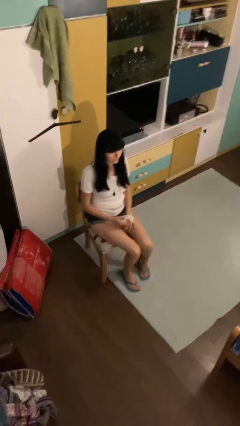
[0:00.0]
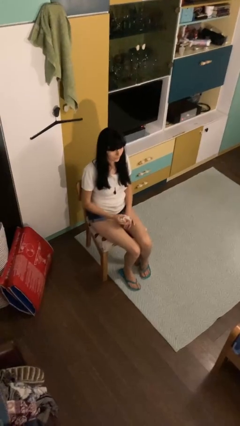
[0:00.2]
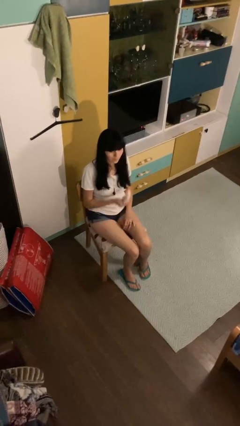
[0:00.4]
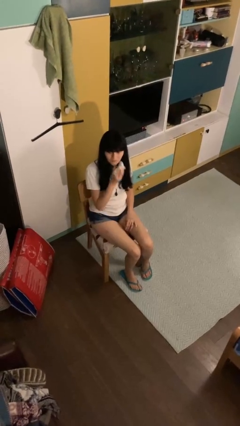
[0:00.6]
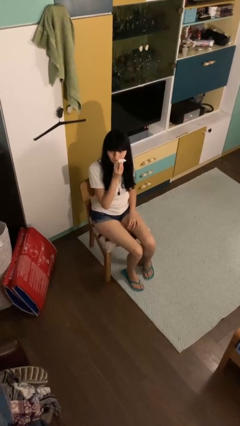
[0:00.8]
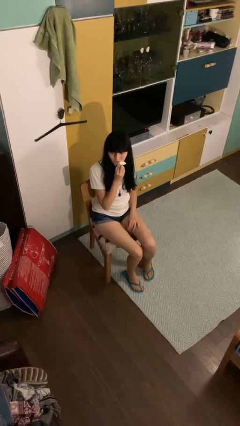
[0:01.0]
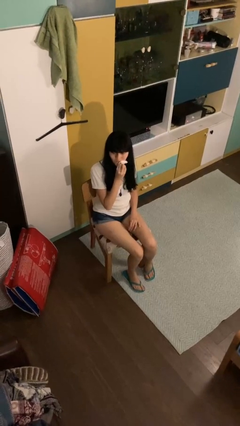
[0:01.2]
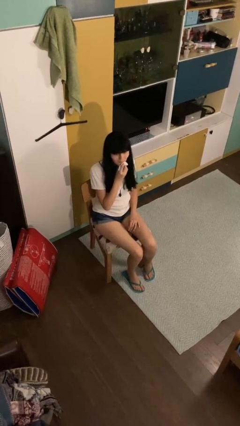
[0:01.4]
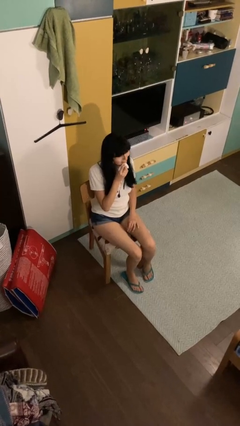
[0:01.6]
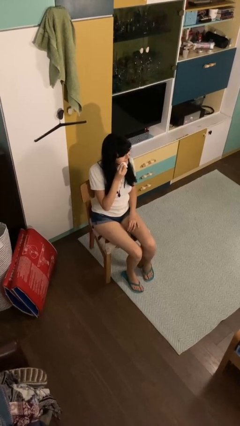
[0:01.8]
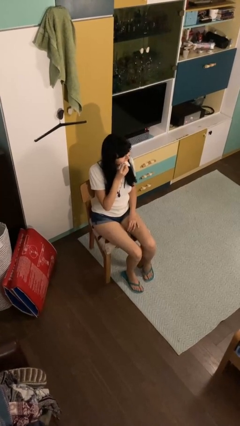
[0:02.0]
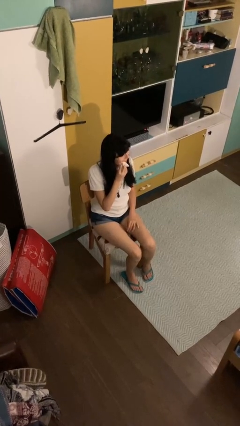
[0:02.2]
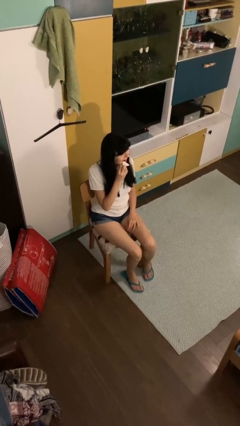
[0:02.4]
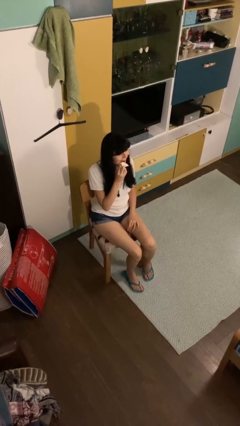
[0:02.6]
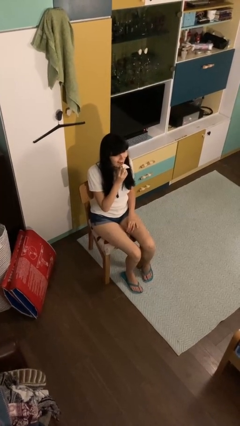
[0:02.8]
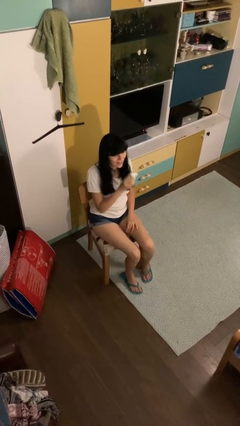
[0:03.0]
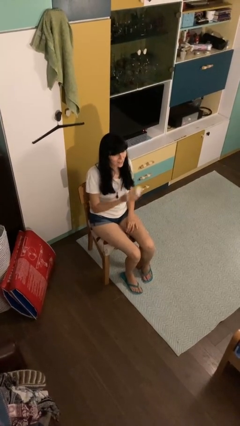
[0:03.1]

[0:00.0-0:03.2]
person wipes mouth with napkin

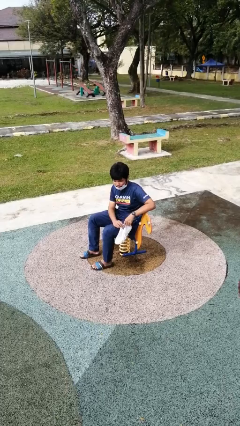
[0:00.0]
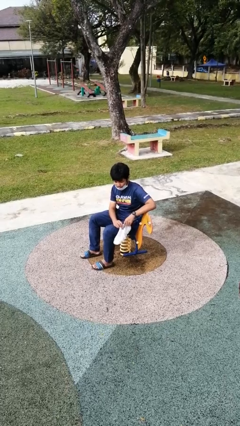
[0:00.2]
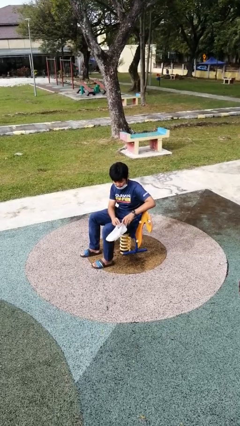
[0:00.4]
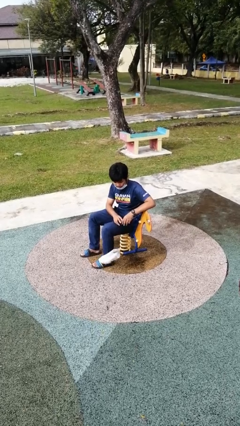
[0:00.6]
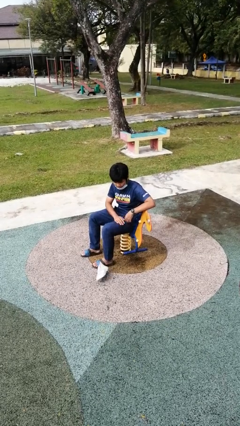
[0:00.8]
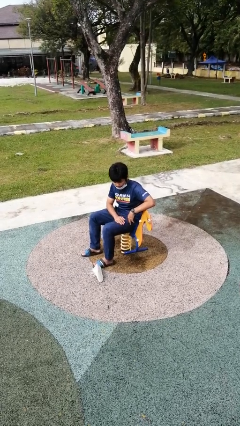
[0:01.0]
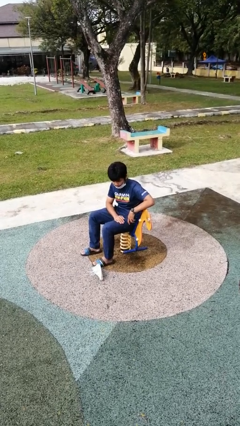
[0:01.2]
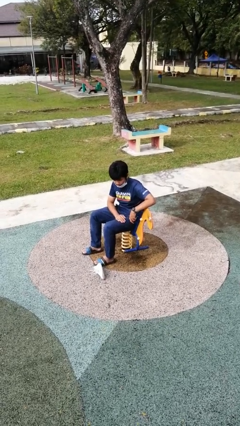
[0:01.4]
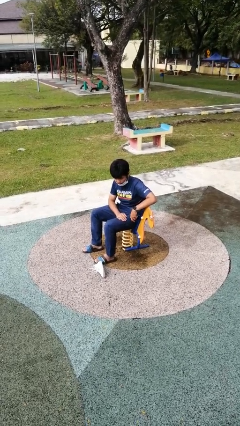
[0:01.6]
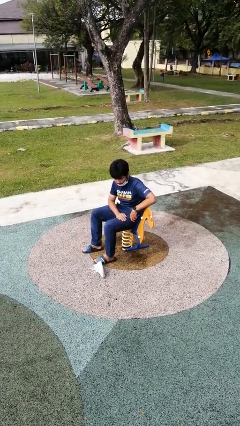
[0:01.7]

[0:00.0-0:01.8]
person drops object

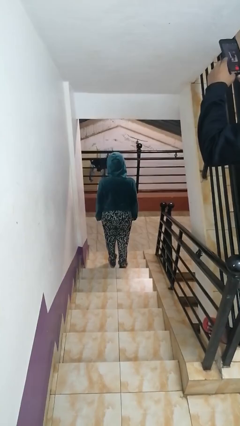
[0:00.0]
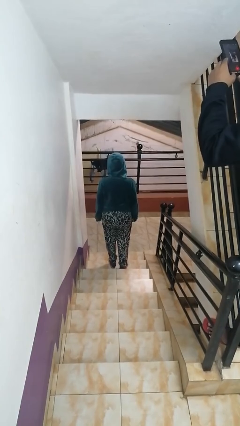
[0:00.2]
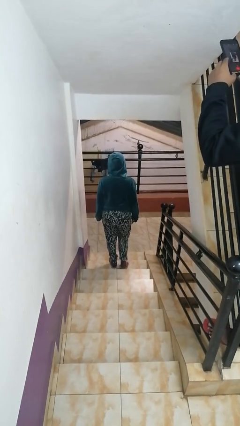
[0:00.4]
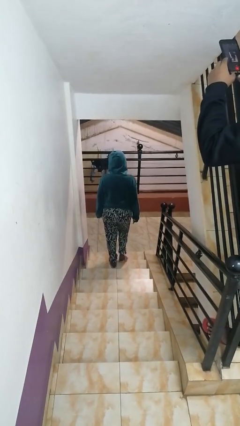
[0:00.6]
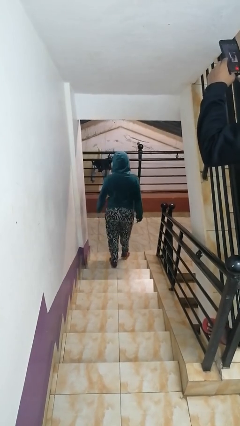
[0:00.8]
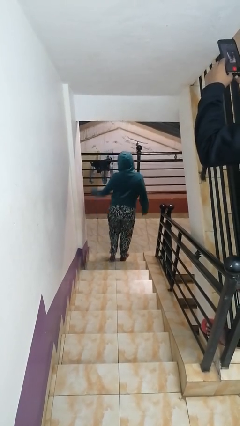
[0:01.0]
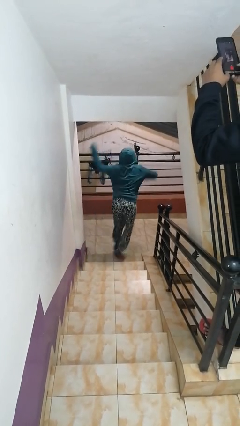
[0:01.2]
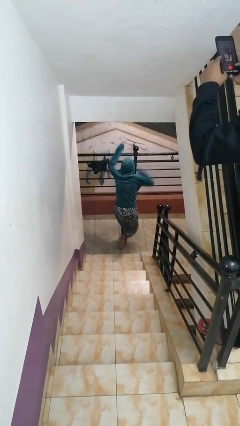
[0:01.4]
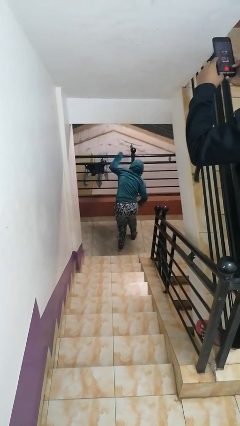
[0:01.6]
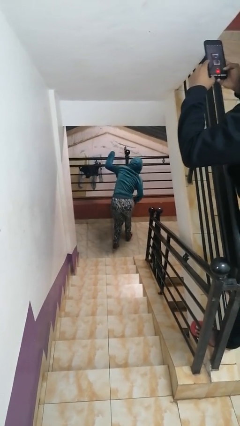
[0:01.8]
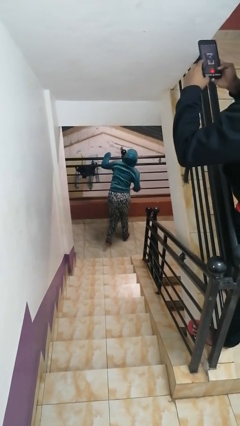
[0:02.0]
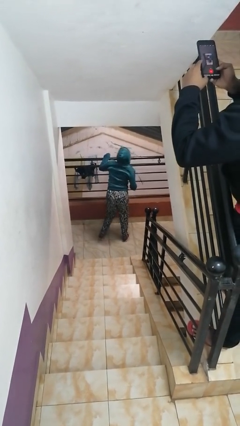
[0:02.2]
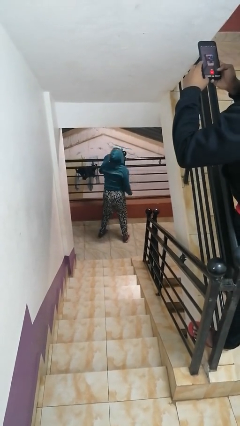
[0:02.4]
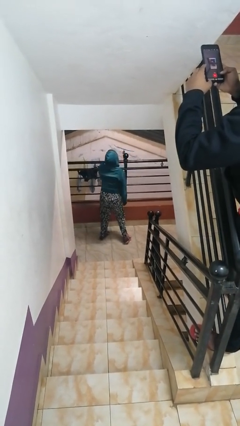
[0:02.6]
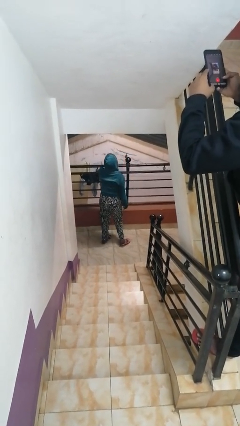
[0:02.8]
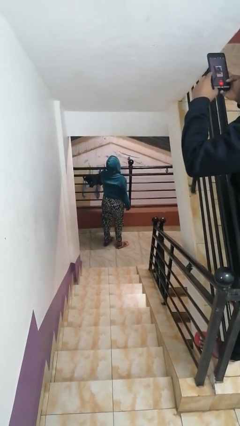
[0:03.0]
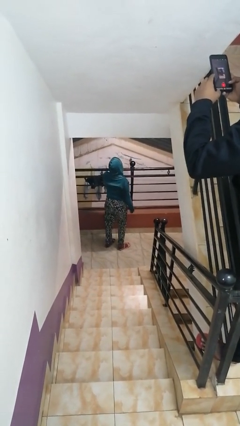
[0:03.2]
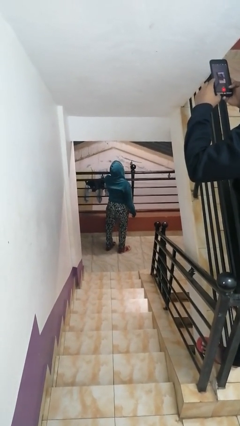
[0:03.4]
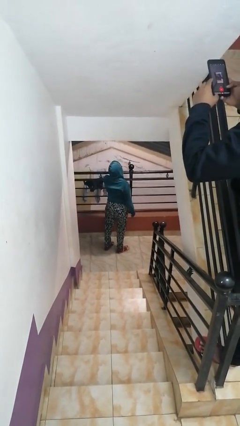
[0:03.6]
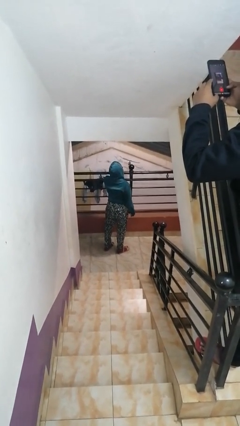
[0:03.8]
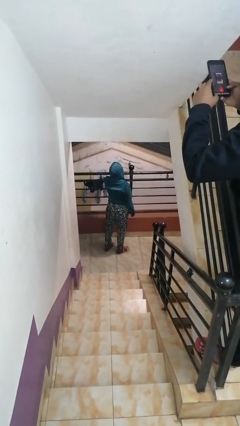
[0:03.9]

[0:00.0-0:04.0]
person trips on stair

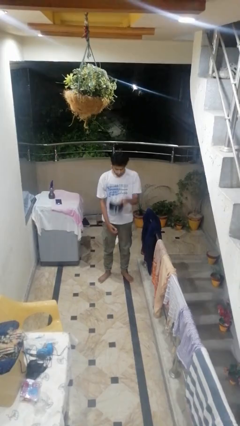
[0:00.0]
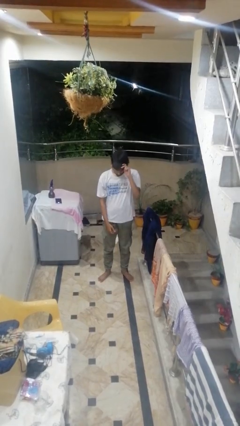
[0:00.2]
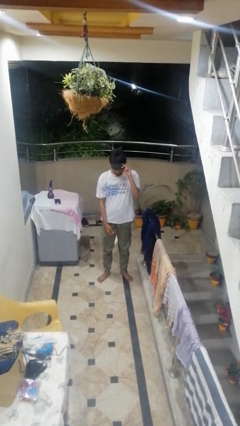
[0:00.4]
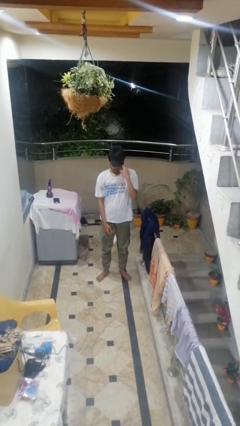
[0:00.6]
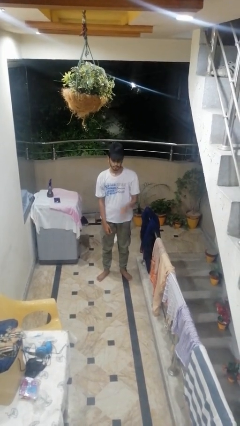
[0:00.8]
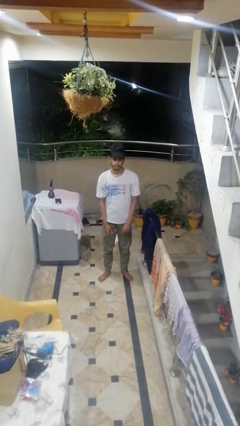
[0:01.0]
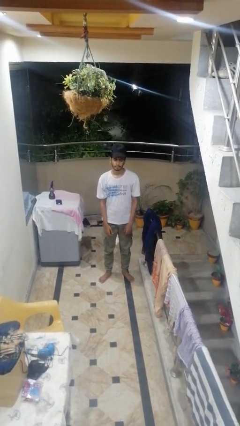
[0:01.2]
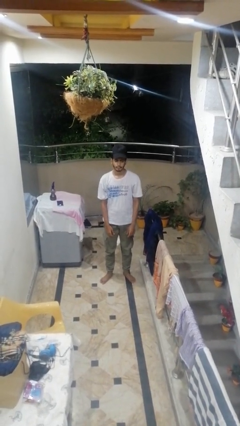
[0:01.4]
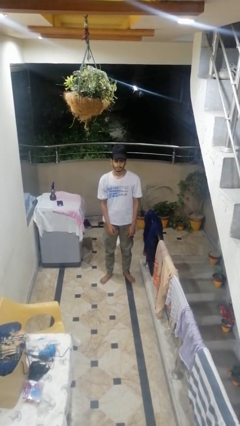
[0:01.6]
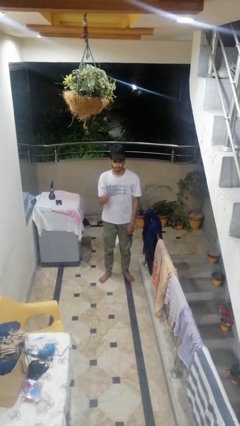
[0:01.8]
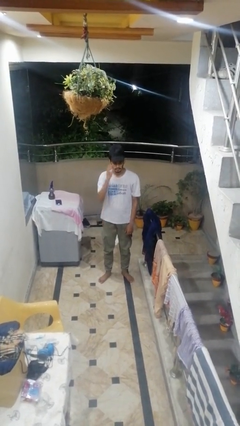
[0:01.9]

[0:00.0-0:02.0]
person puts on hat

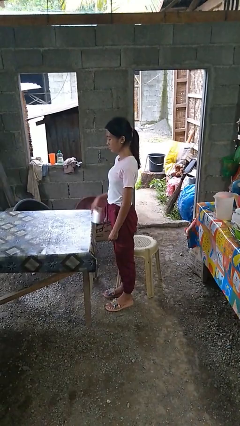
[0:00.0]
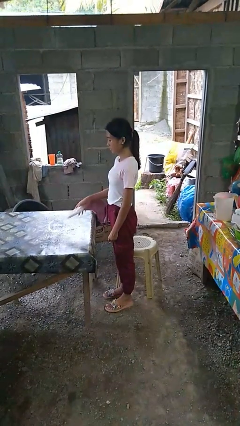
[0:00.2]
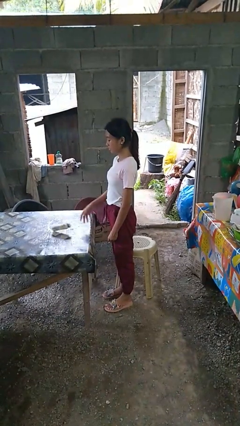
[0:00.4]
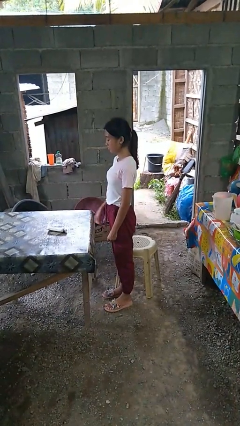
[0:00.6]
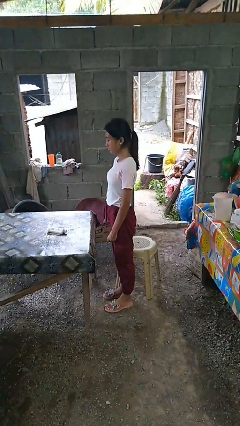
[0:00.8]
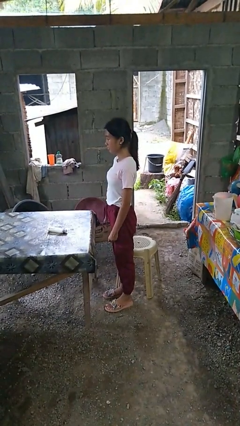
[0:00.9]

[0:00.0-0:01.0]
person throws object on table

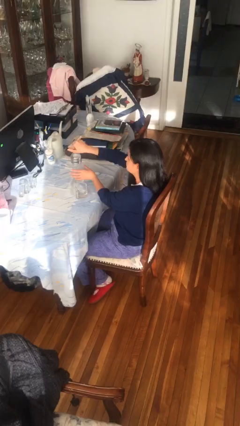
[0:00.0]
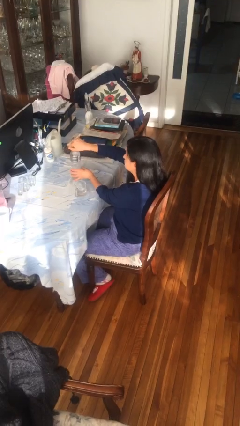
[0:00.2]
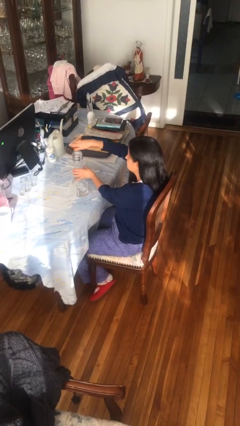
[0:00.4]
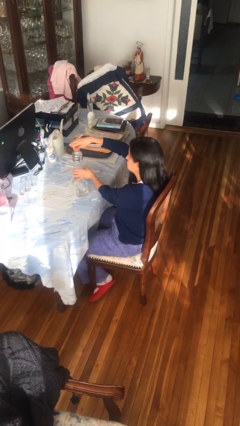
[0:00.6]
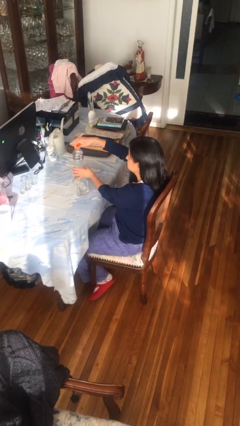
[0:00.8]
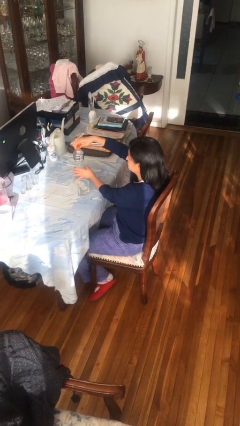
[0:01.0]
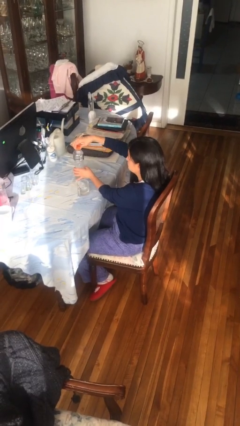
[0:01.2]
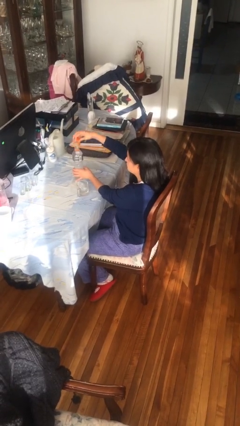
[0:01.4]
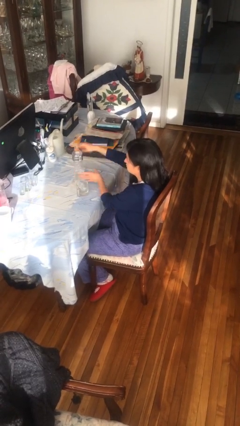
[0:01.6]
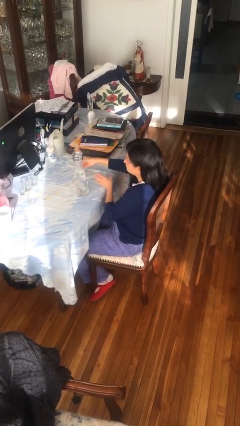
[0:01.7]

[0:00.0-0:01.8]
person unscrews lid from bottle

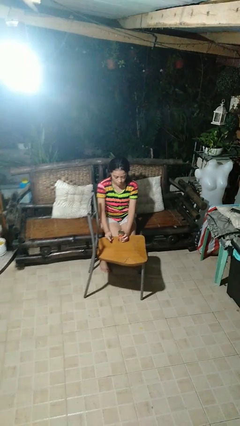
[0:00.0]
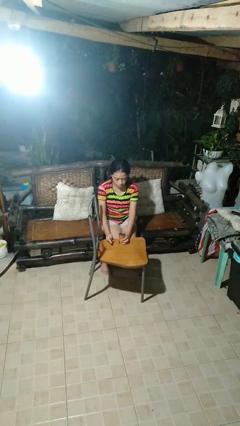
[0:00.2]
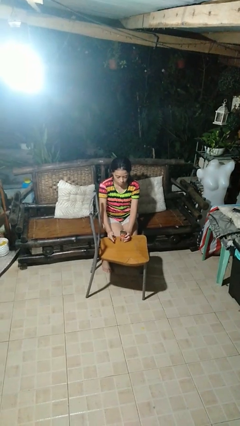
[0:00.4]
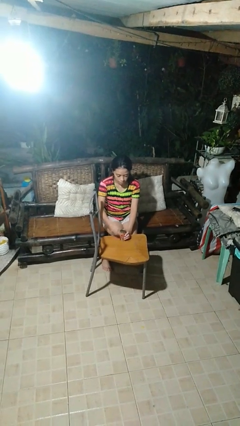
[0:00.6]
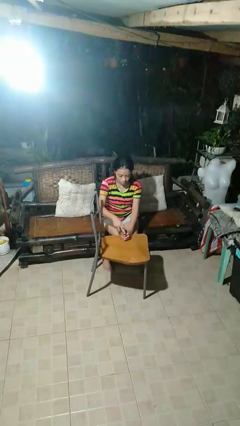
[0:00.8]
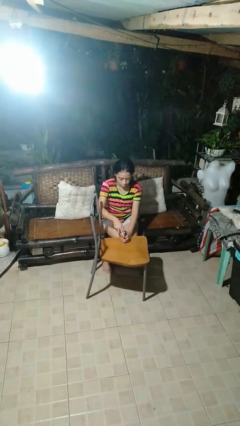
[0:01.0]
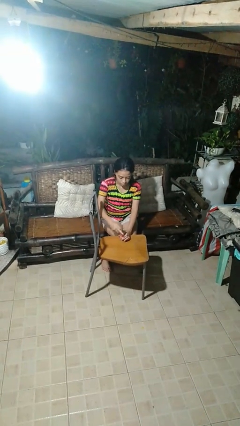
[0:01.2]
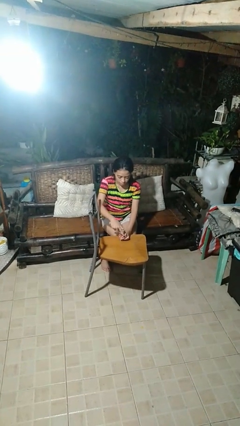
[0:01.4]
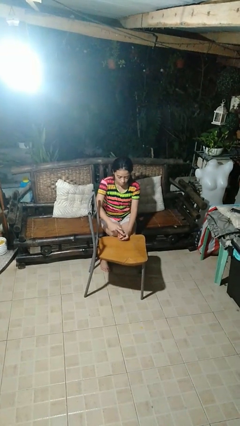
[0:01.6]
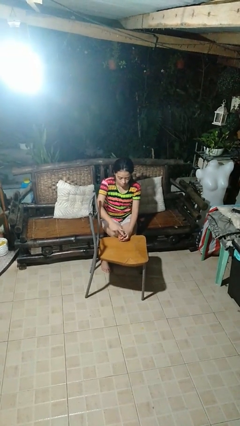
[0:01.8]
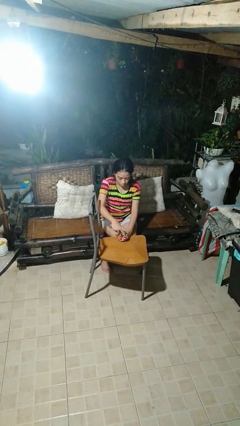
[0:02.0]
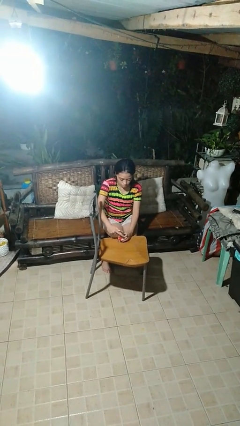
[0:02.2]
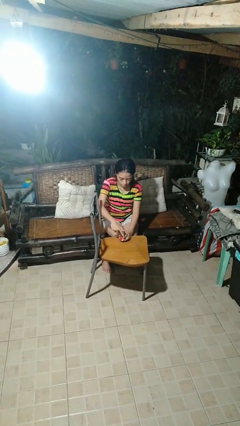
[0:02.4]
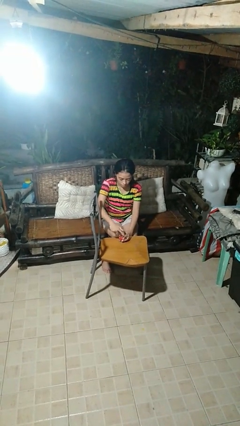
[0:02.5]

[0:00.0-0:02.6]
person opens can with can opener

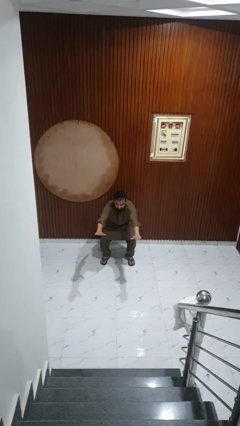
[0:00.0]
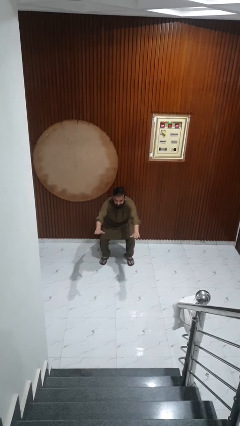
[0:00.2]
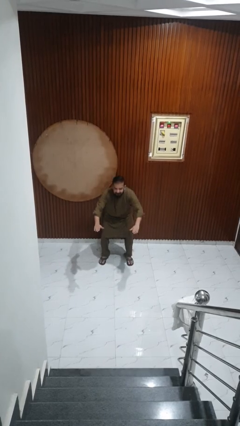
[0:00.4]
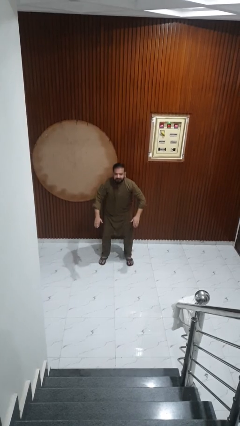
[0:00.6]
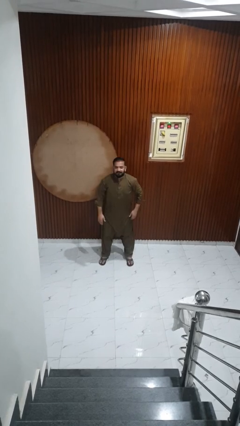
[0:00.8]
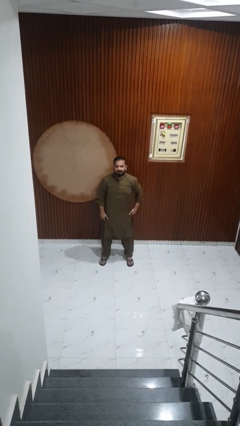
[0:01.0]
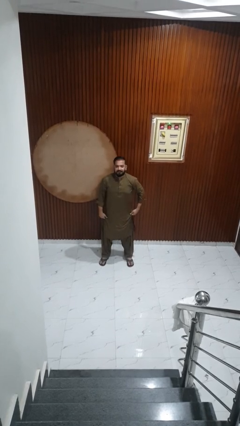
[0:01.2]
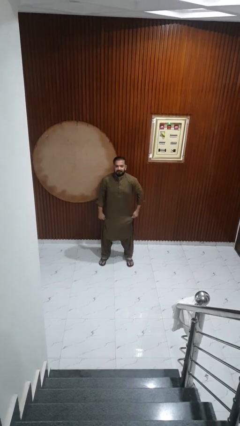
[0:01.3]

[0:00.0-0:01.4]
person stands up
